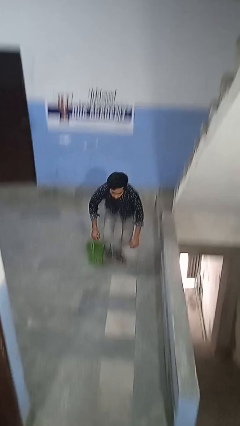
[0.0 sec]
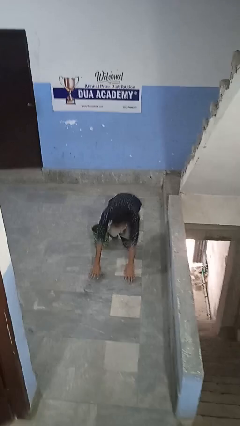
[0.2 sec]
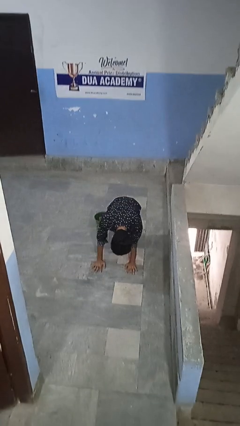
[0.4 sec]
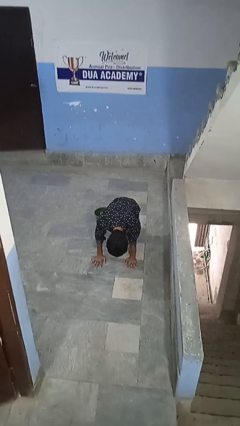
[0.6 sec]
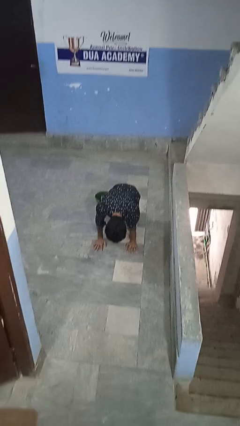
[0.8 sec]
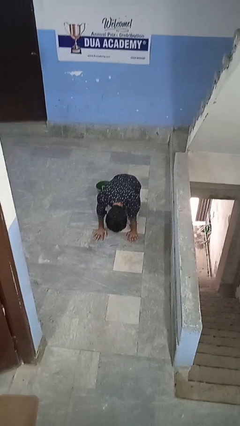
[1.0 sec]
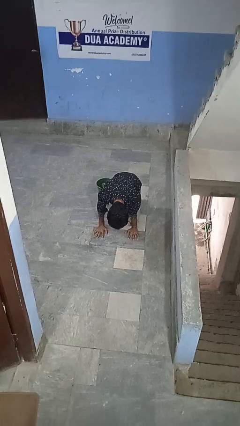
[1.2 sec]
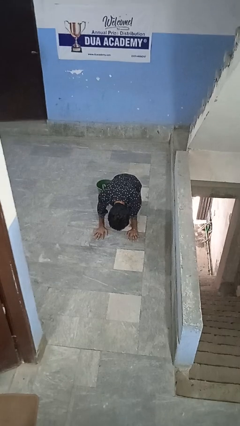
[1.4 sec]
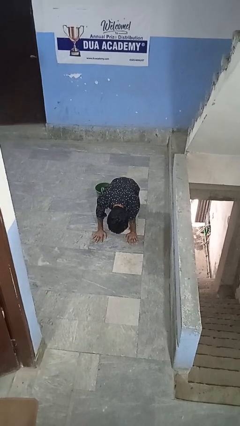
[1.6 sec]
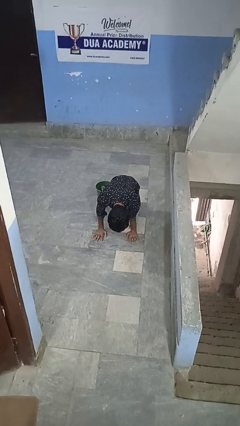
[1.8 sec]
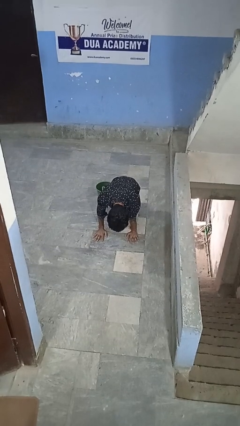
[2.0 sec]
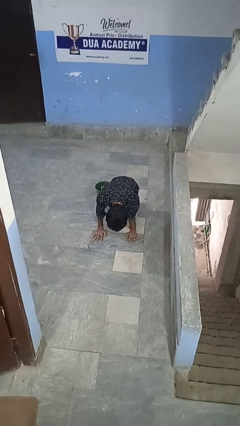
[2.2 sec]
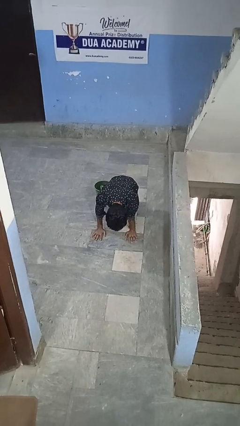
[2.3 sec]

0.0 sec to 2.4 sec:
person trips on object on floor

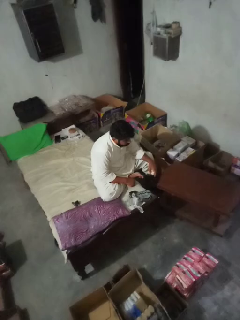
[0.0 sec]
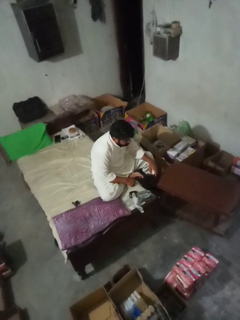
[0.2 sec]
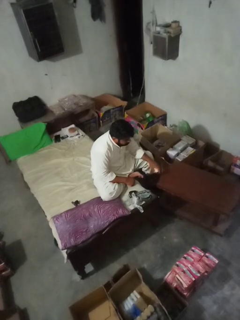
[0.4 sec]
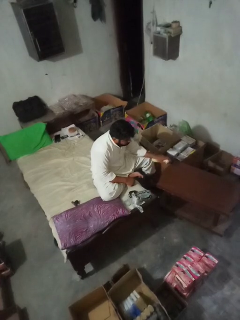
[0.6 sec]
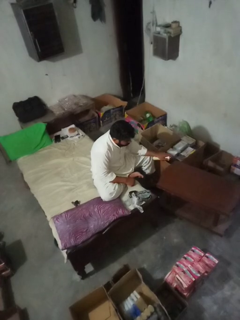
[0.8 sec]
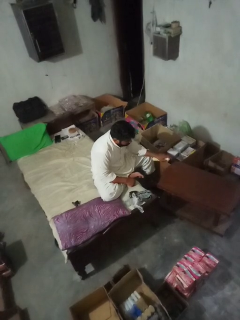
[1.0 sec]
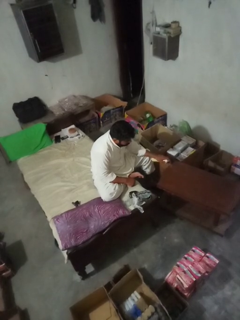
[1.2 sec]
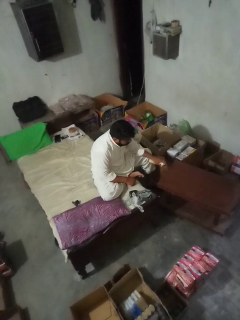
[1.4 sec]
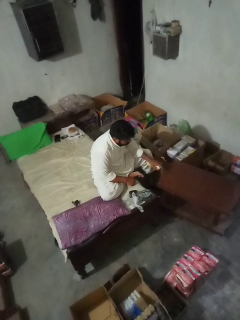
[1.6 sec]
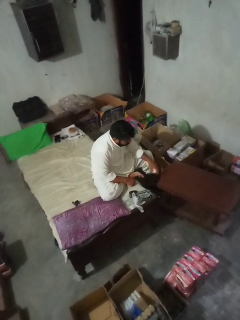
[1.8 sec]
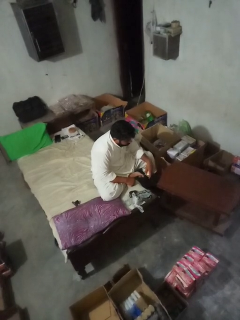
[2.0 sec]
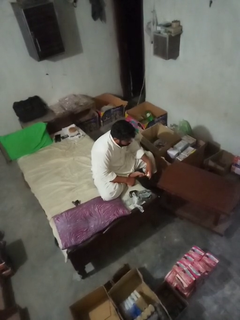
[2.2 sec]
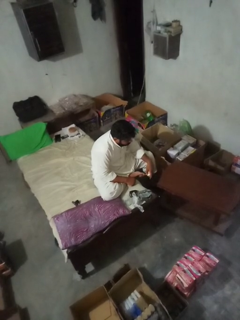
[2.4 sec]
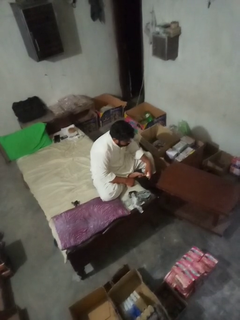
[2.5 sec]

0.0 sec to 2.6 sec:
person sprays from bottle

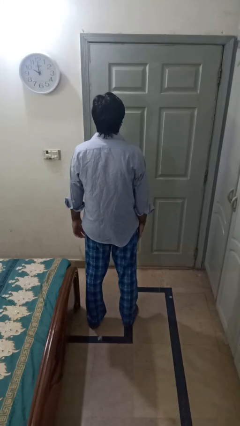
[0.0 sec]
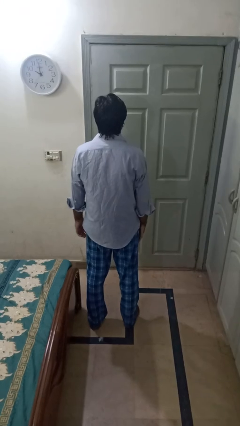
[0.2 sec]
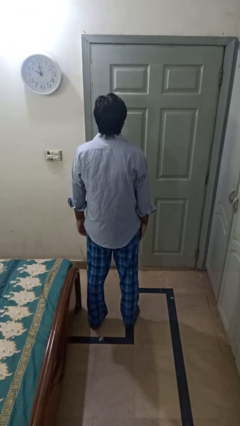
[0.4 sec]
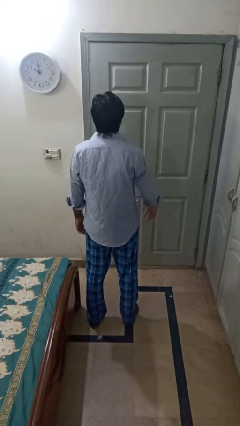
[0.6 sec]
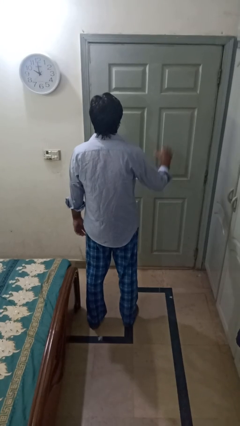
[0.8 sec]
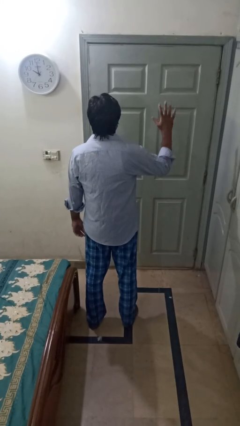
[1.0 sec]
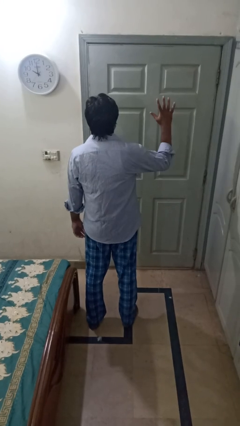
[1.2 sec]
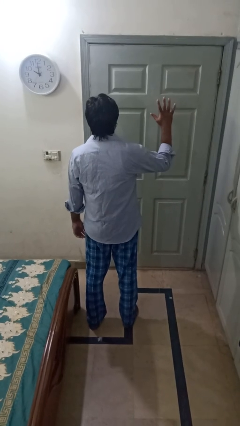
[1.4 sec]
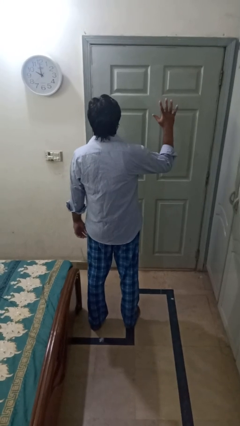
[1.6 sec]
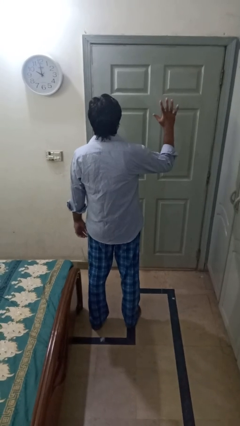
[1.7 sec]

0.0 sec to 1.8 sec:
person gestures number five

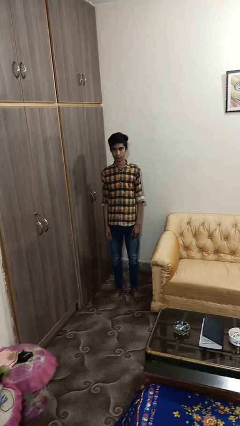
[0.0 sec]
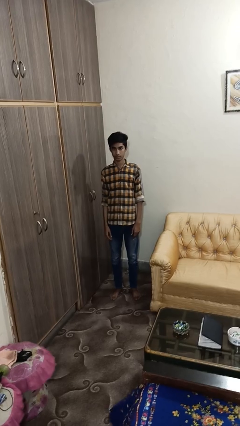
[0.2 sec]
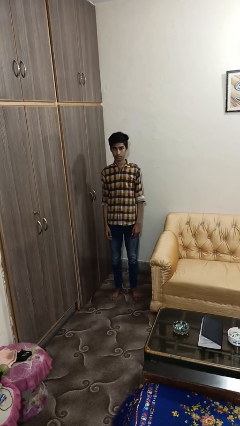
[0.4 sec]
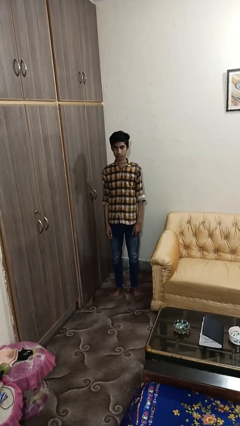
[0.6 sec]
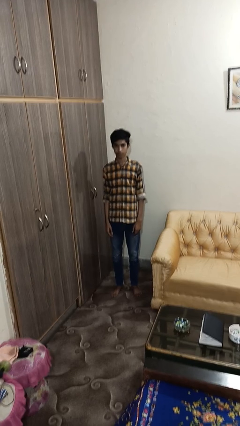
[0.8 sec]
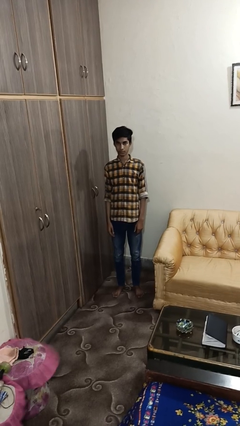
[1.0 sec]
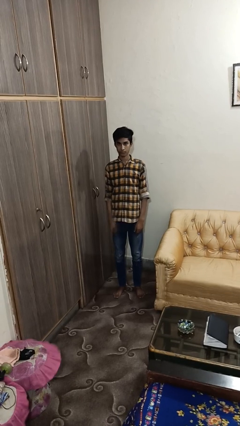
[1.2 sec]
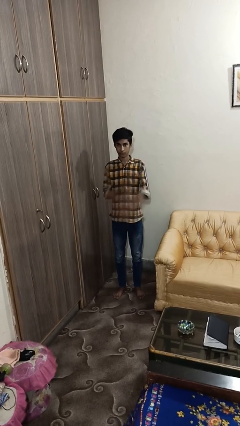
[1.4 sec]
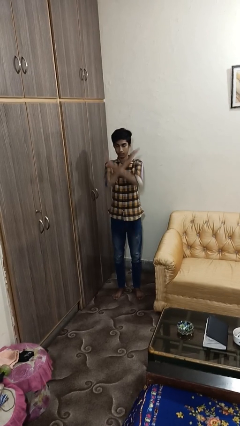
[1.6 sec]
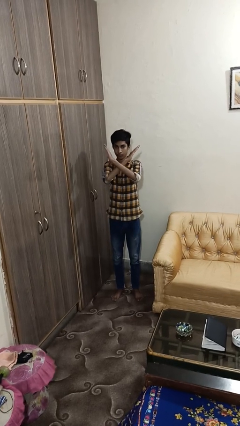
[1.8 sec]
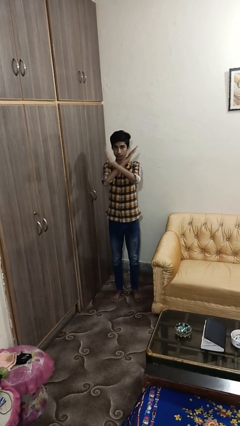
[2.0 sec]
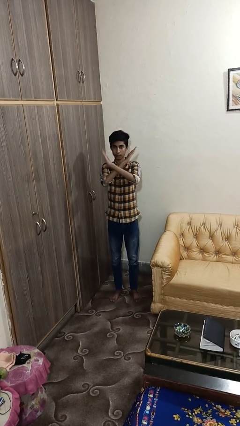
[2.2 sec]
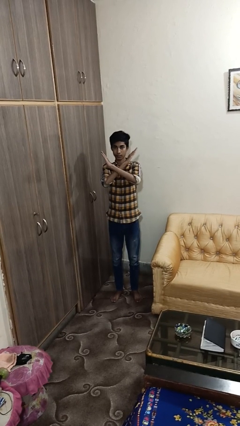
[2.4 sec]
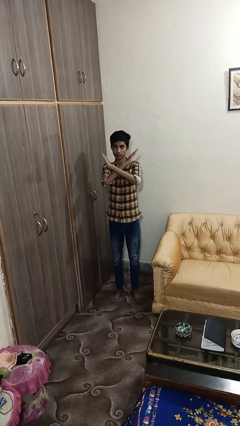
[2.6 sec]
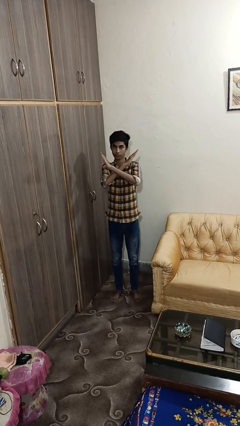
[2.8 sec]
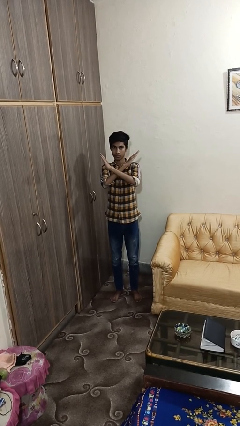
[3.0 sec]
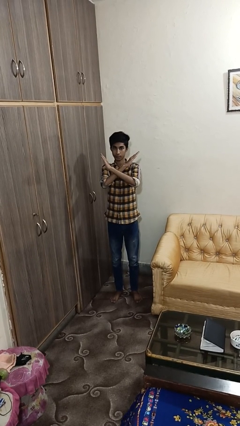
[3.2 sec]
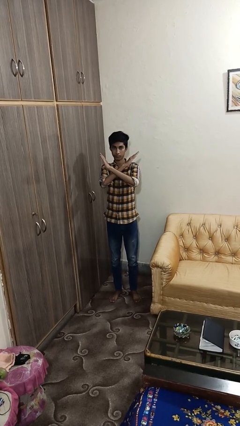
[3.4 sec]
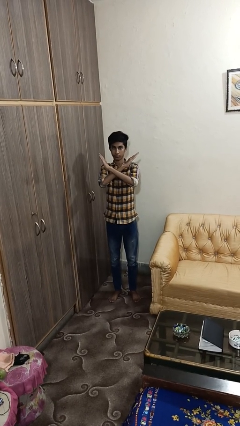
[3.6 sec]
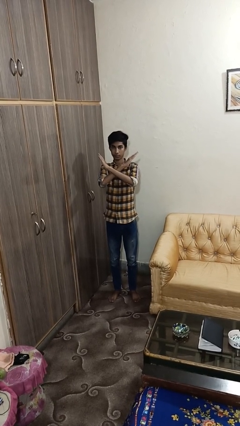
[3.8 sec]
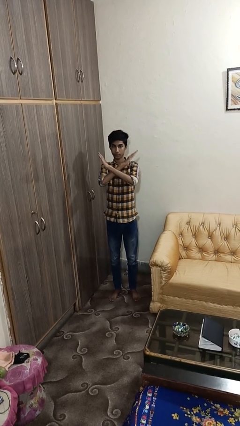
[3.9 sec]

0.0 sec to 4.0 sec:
person gestures arms x

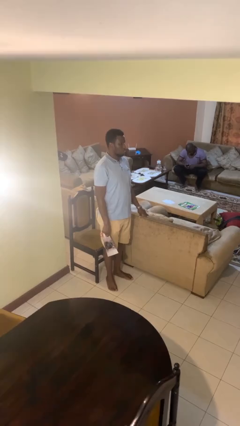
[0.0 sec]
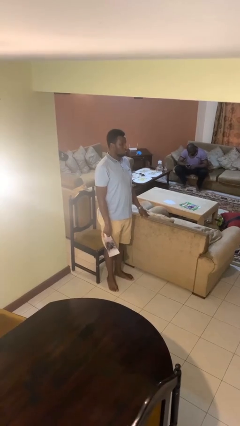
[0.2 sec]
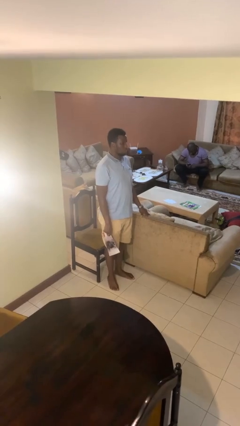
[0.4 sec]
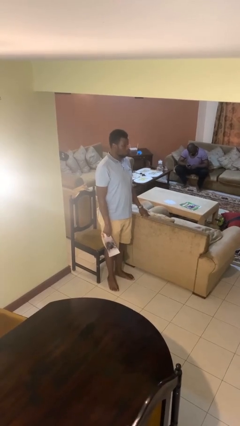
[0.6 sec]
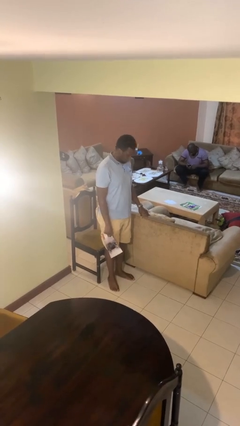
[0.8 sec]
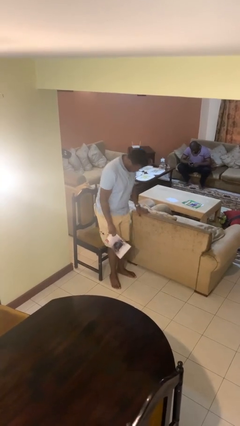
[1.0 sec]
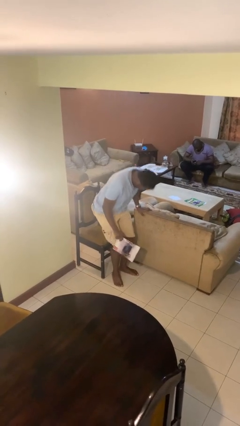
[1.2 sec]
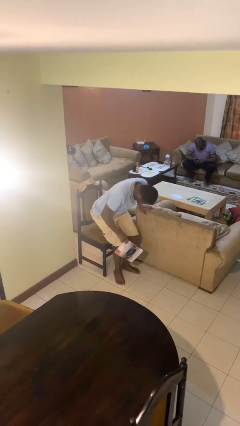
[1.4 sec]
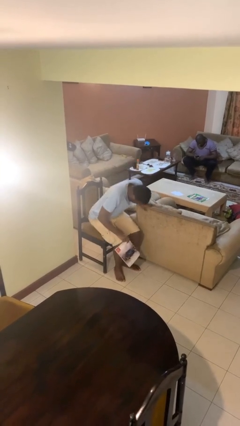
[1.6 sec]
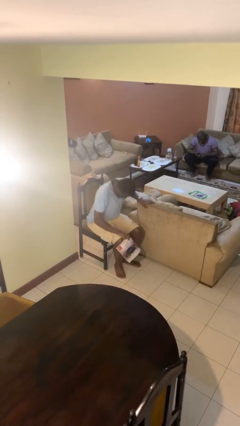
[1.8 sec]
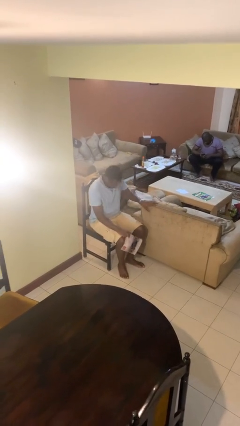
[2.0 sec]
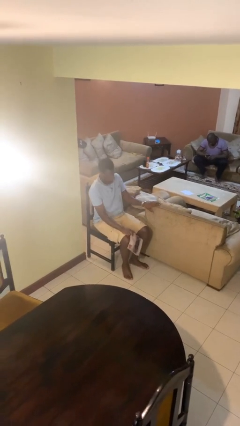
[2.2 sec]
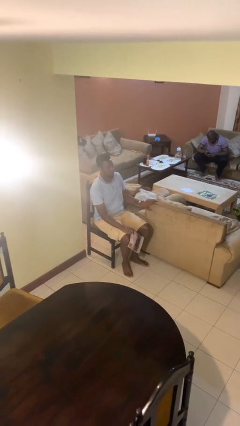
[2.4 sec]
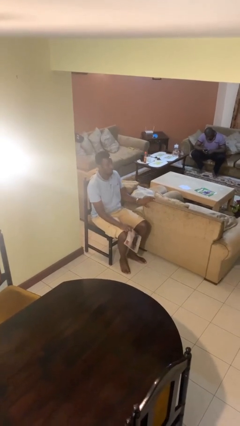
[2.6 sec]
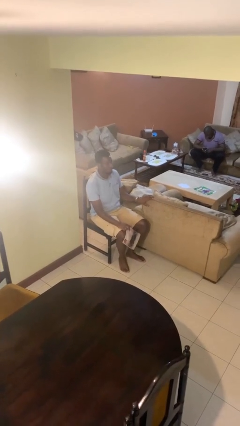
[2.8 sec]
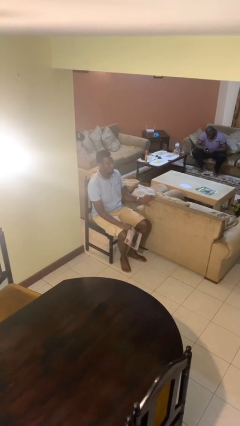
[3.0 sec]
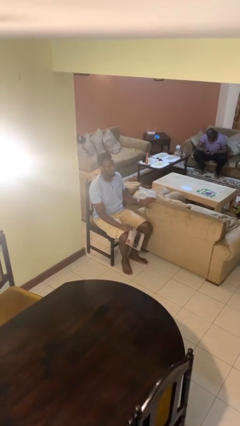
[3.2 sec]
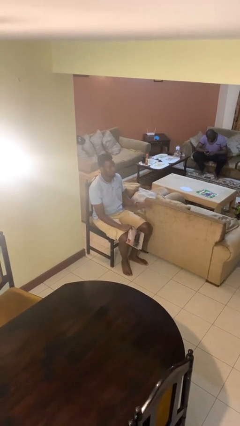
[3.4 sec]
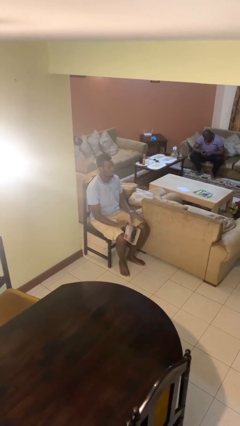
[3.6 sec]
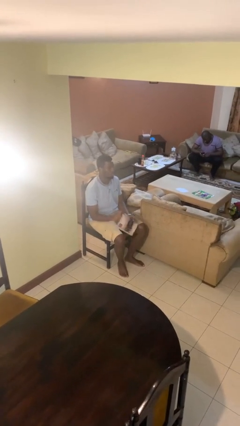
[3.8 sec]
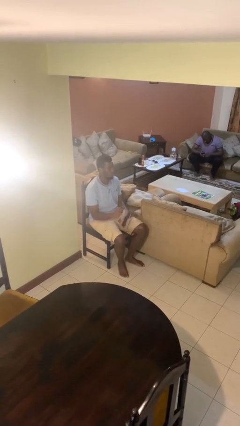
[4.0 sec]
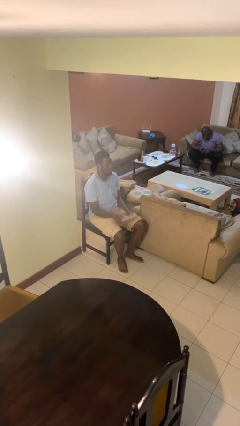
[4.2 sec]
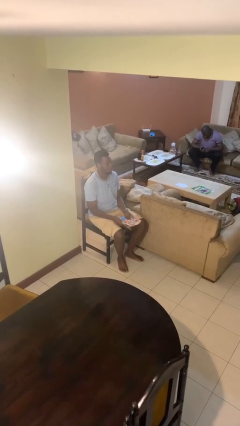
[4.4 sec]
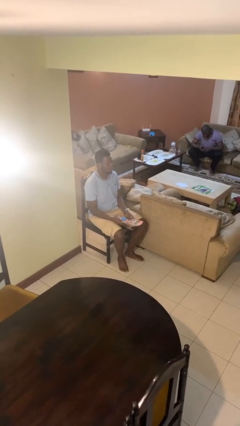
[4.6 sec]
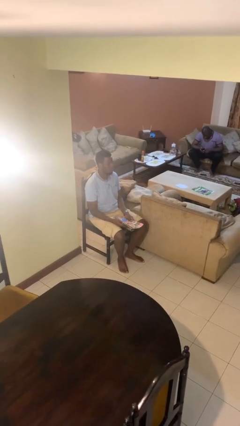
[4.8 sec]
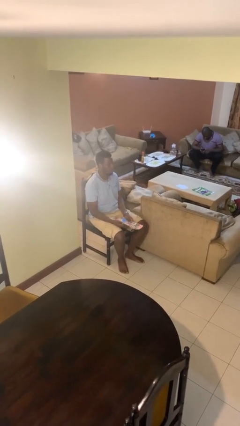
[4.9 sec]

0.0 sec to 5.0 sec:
person sits down

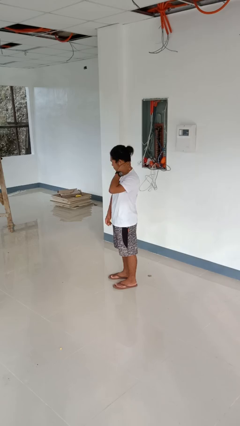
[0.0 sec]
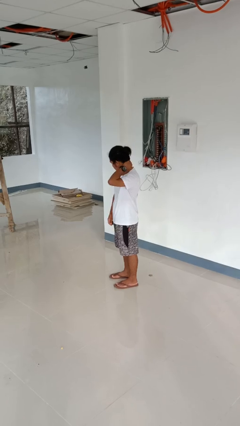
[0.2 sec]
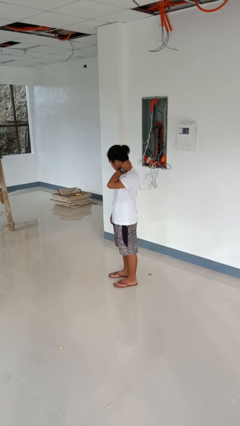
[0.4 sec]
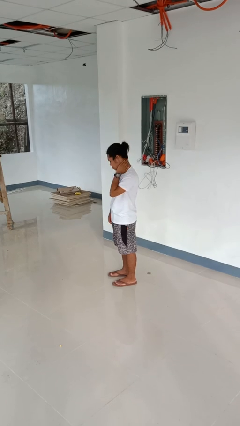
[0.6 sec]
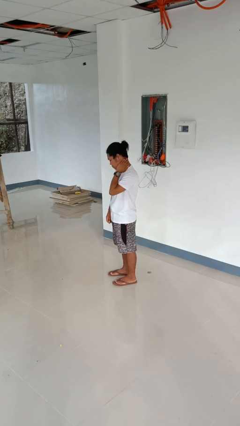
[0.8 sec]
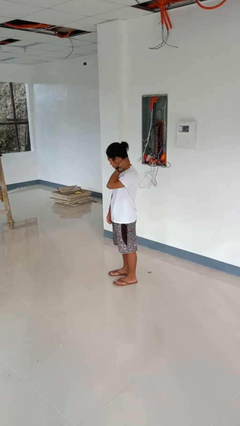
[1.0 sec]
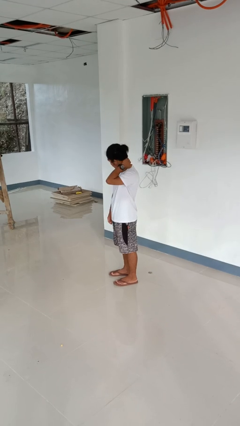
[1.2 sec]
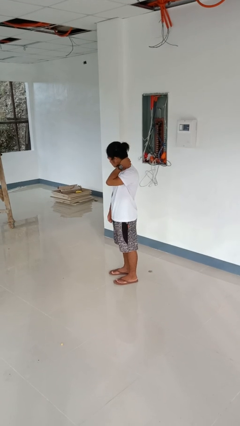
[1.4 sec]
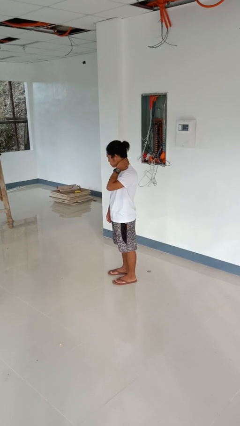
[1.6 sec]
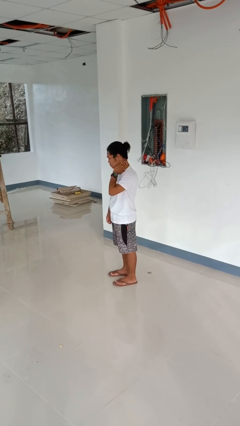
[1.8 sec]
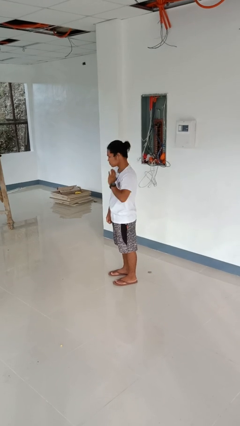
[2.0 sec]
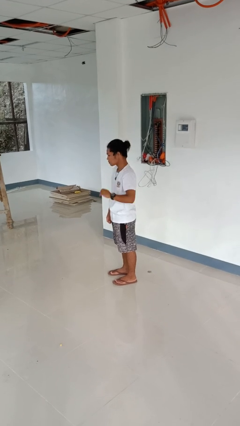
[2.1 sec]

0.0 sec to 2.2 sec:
person rubs neck
